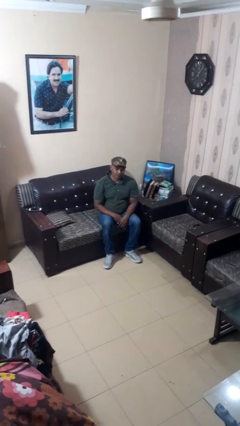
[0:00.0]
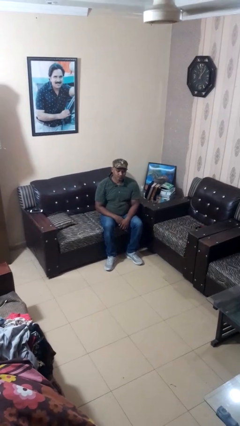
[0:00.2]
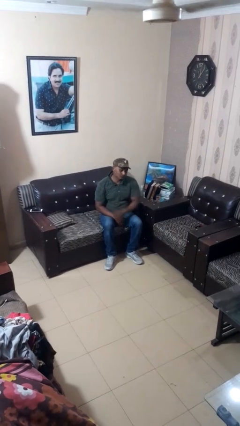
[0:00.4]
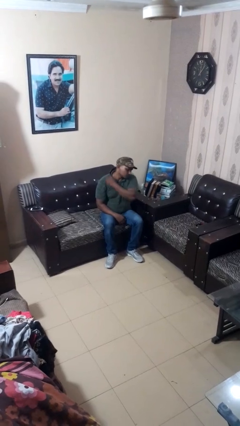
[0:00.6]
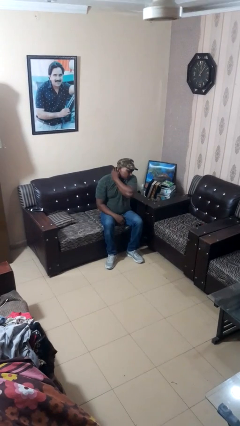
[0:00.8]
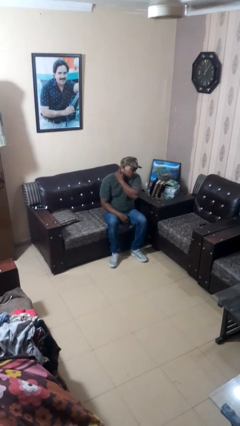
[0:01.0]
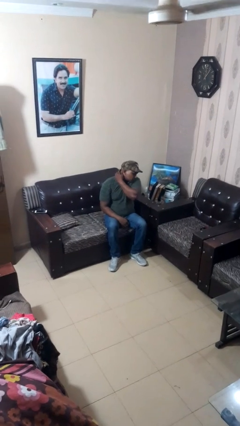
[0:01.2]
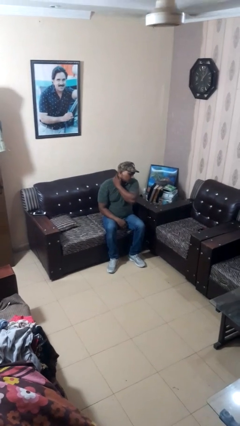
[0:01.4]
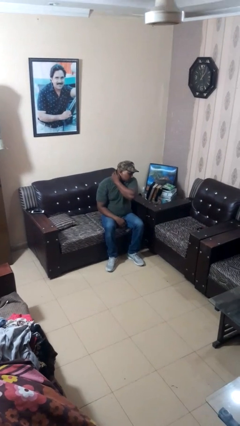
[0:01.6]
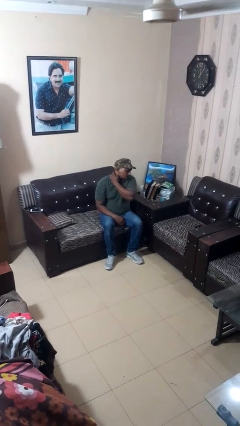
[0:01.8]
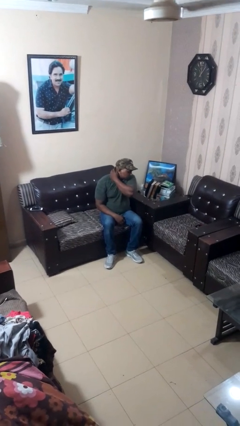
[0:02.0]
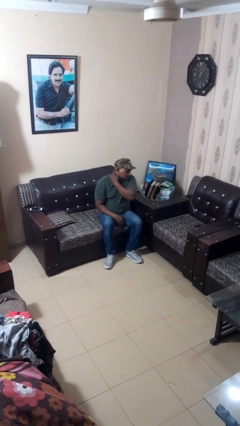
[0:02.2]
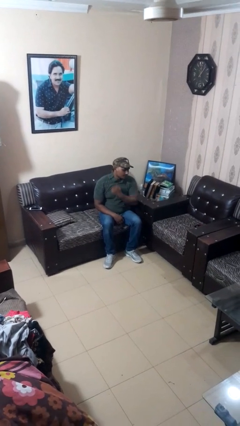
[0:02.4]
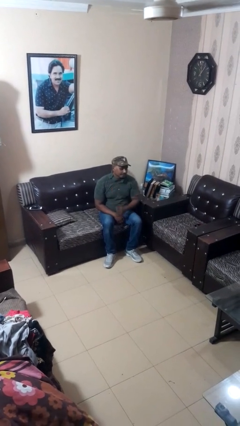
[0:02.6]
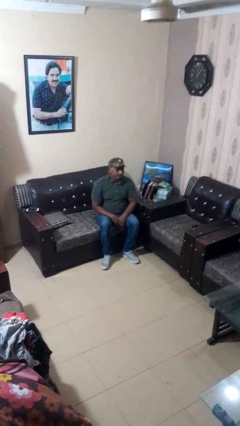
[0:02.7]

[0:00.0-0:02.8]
person rubs neck

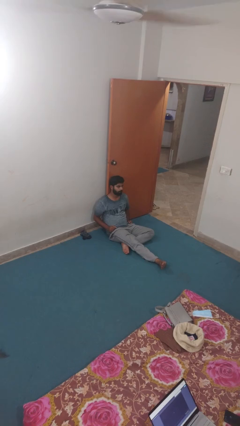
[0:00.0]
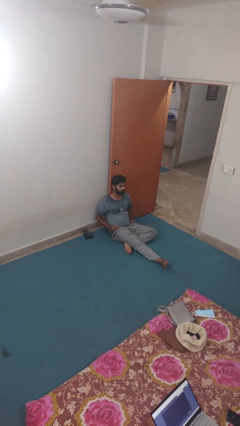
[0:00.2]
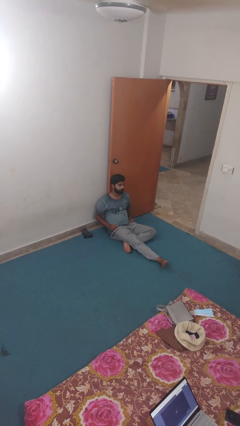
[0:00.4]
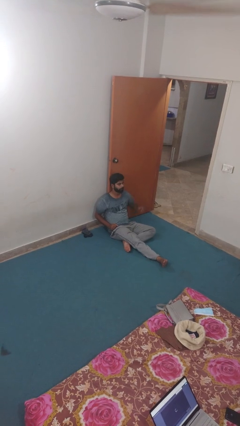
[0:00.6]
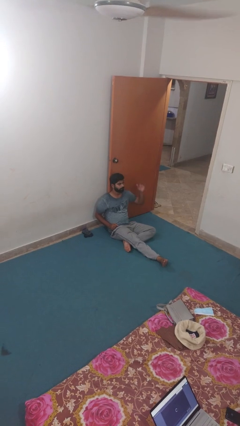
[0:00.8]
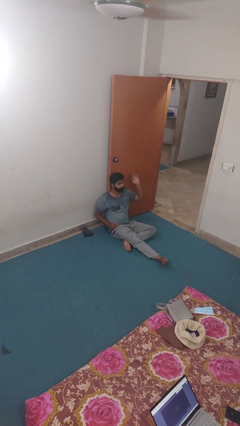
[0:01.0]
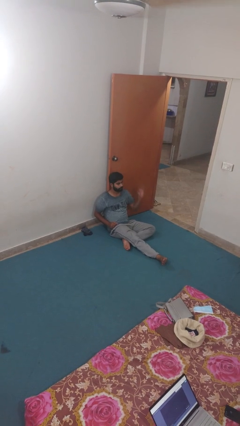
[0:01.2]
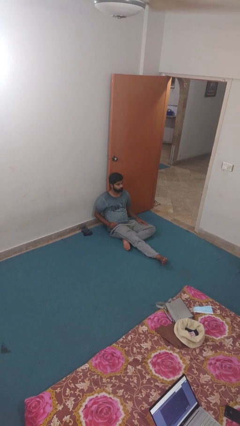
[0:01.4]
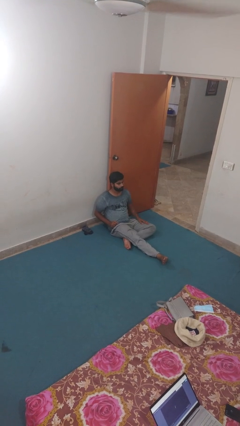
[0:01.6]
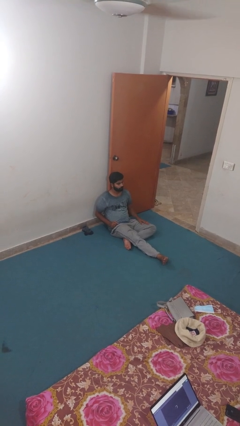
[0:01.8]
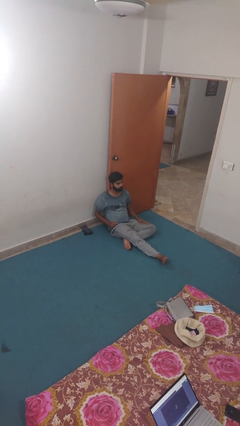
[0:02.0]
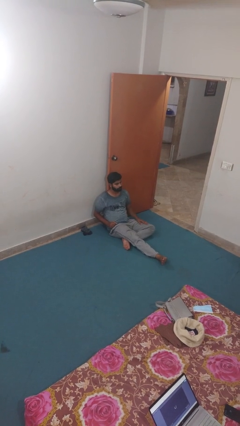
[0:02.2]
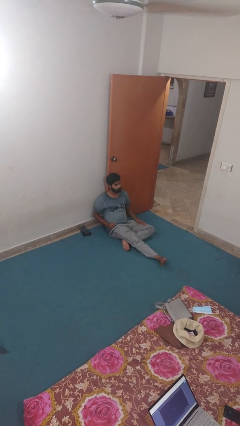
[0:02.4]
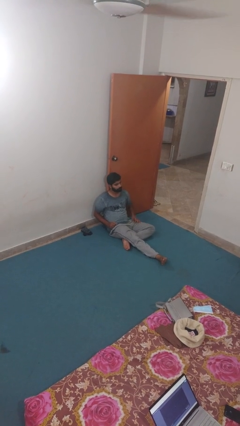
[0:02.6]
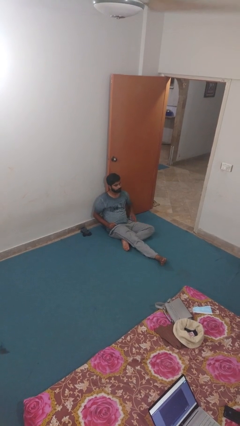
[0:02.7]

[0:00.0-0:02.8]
person slaps hands on thighs

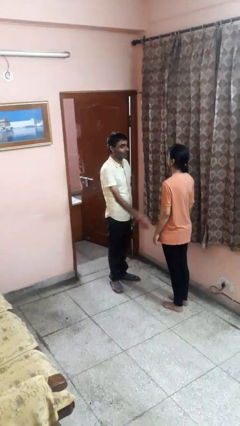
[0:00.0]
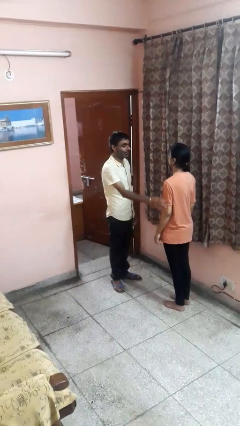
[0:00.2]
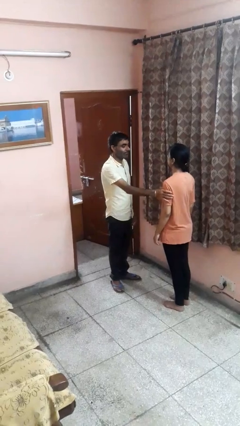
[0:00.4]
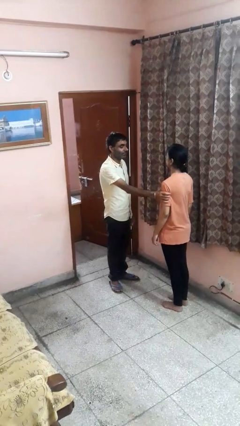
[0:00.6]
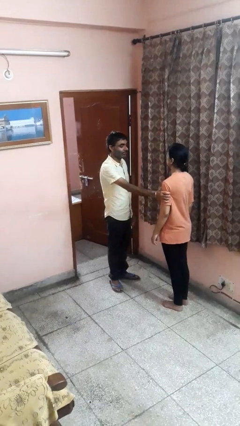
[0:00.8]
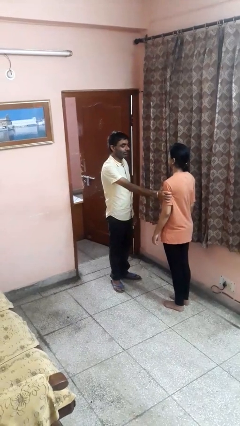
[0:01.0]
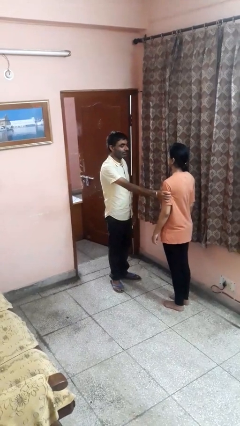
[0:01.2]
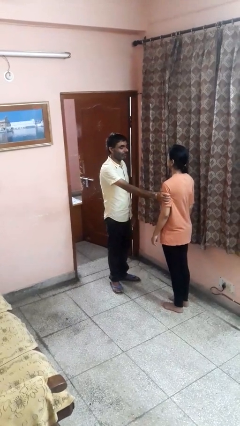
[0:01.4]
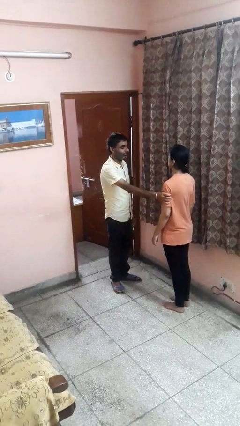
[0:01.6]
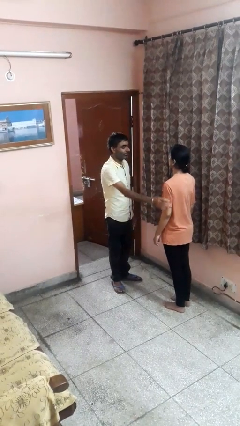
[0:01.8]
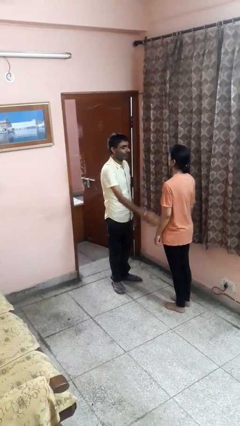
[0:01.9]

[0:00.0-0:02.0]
person grabs person by bicep

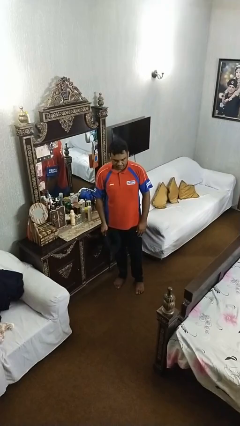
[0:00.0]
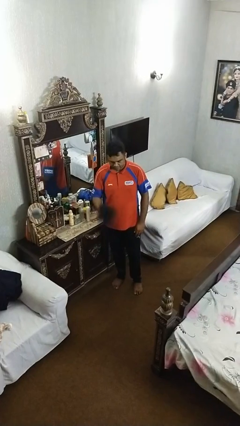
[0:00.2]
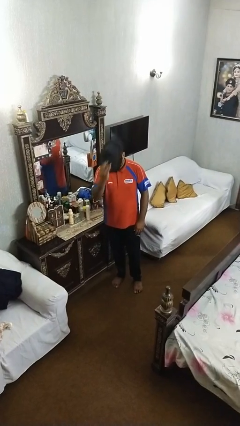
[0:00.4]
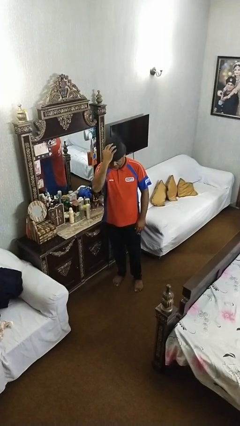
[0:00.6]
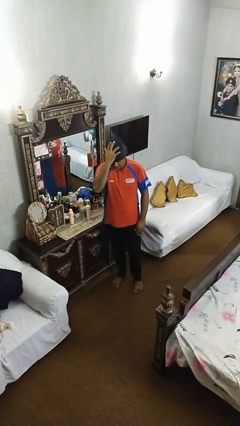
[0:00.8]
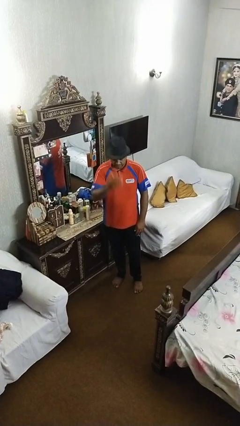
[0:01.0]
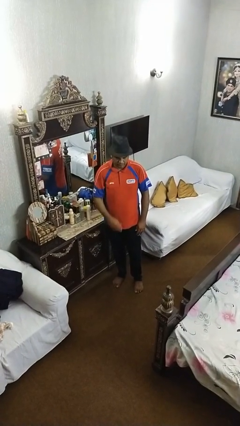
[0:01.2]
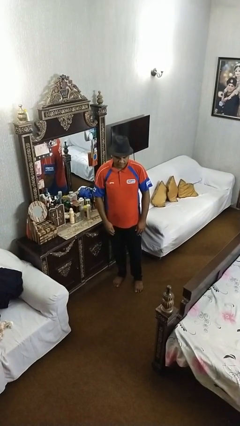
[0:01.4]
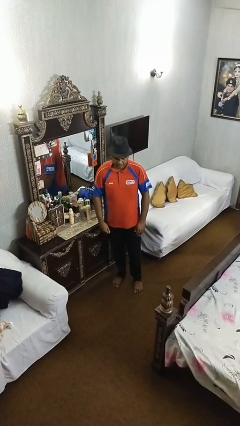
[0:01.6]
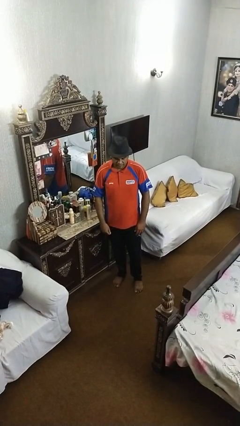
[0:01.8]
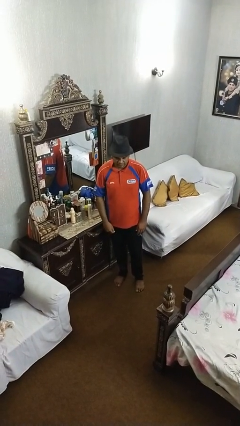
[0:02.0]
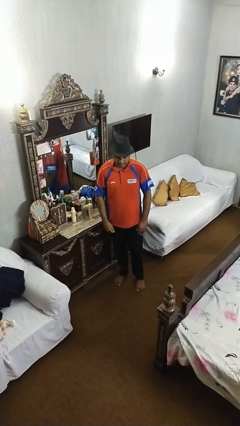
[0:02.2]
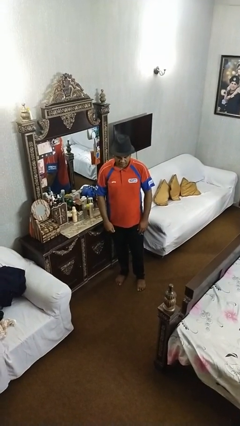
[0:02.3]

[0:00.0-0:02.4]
person puts on hat

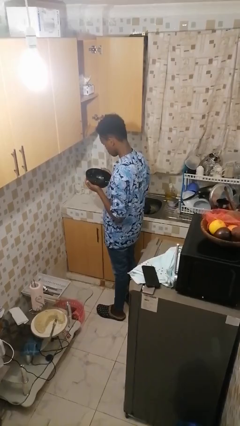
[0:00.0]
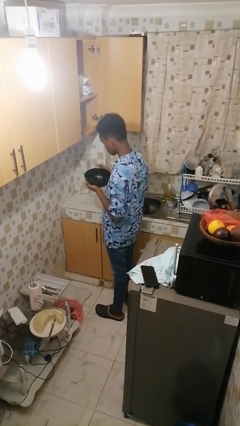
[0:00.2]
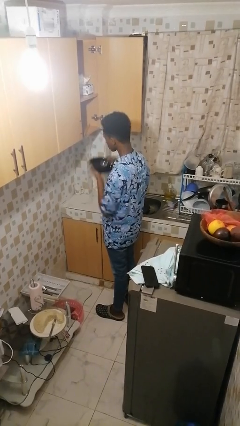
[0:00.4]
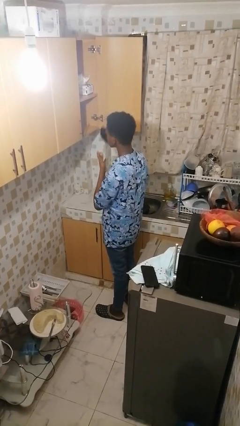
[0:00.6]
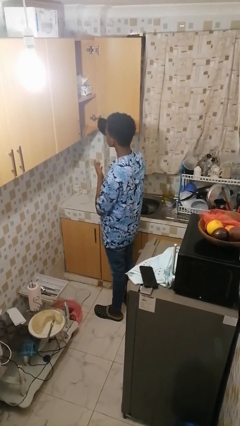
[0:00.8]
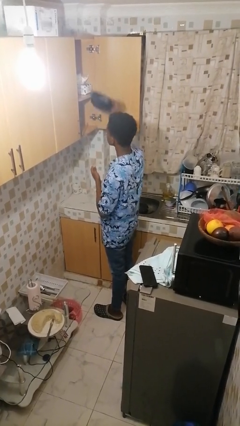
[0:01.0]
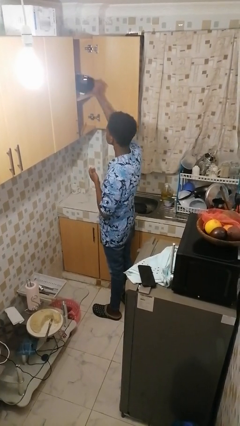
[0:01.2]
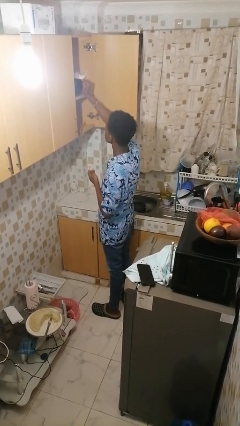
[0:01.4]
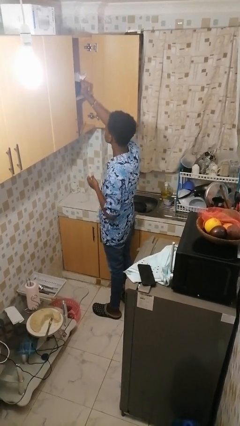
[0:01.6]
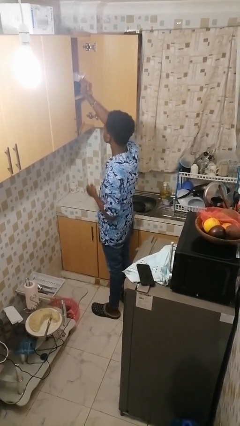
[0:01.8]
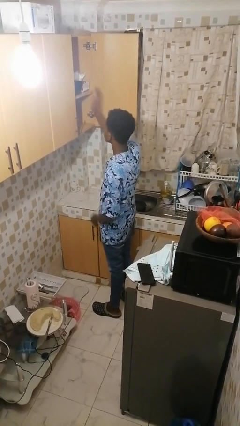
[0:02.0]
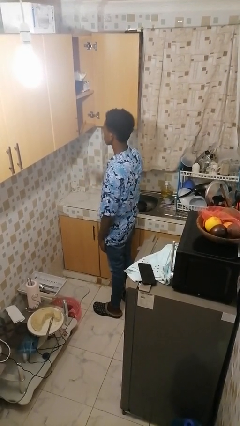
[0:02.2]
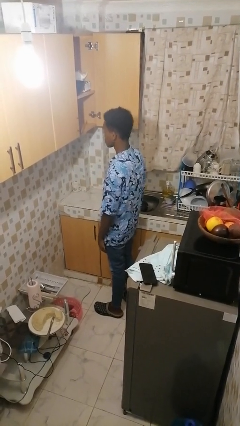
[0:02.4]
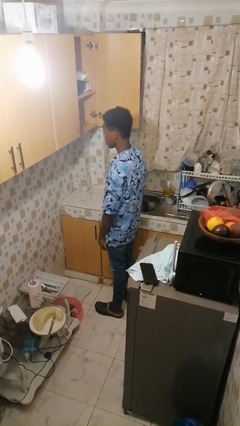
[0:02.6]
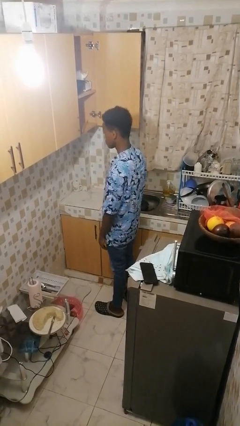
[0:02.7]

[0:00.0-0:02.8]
person puts down object into cabinet

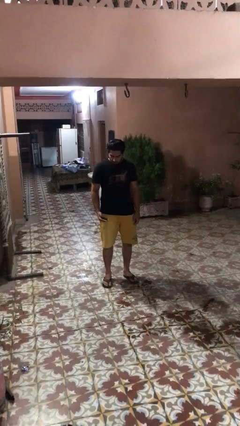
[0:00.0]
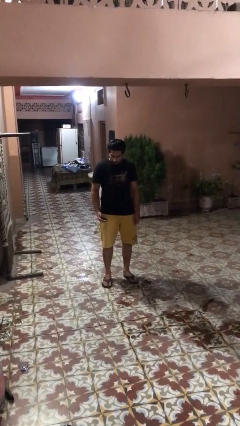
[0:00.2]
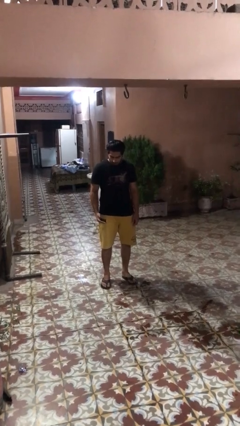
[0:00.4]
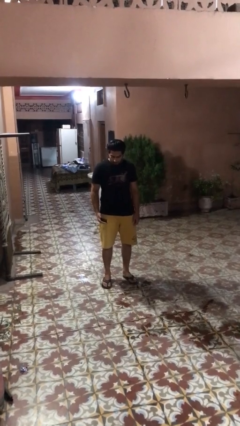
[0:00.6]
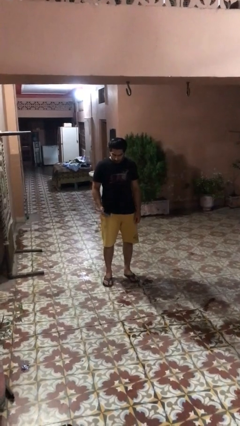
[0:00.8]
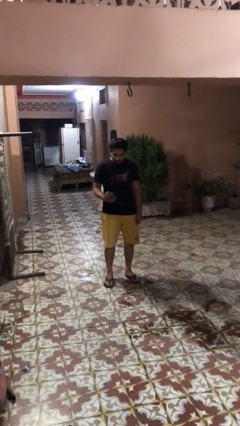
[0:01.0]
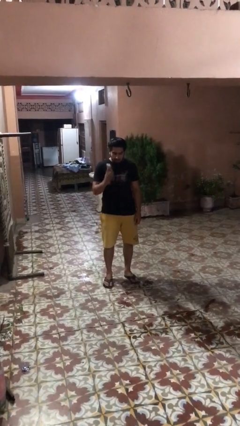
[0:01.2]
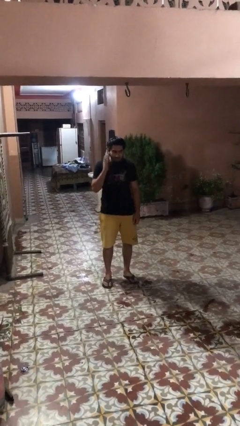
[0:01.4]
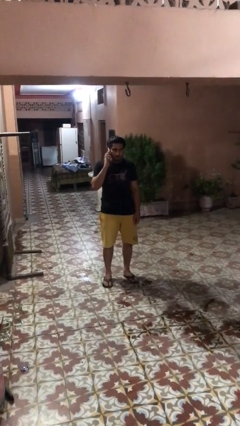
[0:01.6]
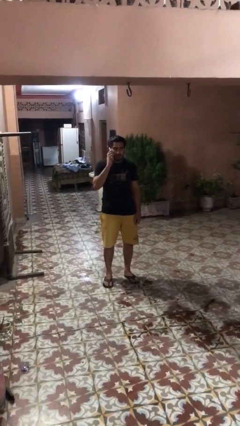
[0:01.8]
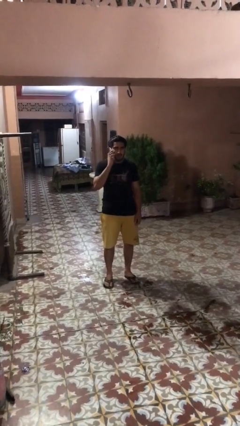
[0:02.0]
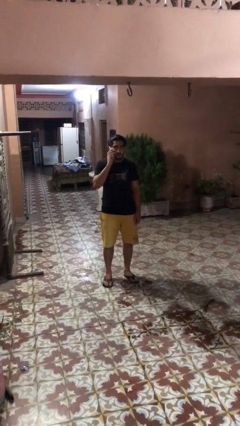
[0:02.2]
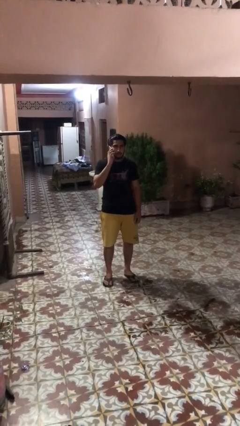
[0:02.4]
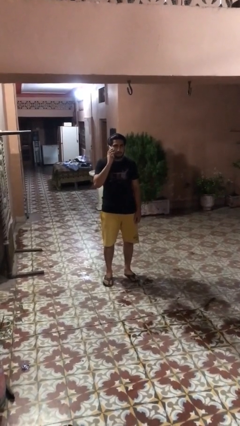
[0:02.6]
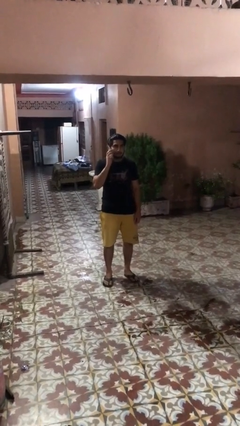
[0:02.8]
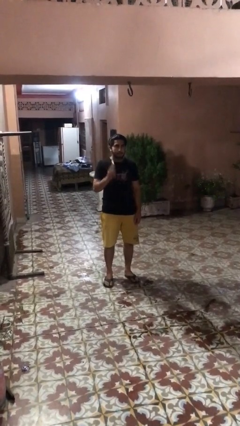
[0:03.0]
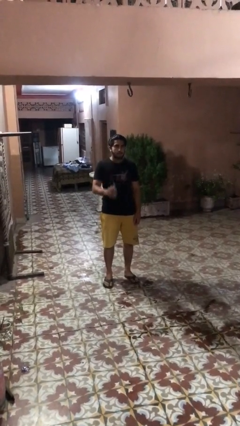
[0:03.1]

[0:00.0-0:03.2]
person gestures call me

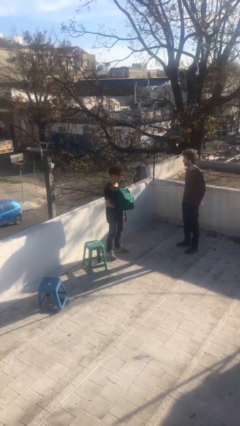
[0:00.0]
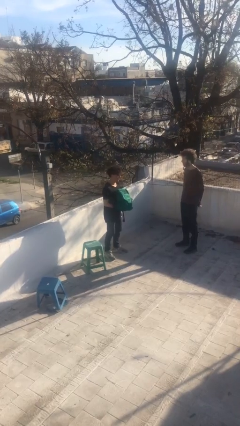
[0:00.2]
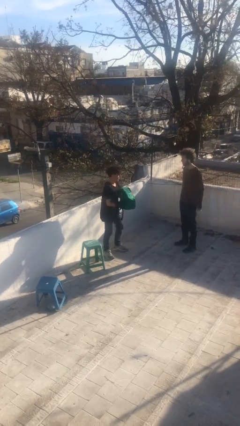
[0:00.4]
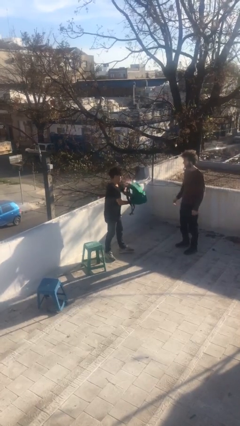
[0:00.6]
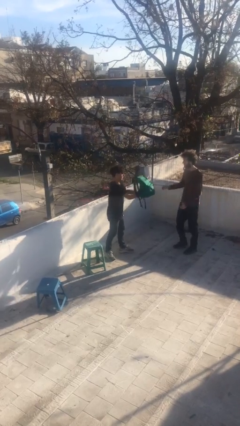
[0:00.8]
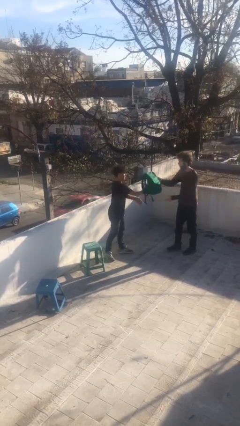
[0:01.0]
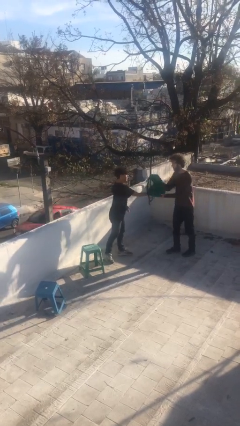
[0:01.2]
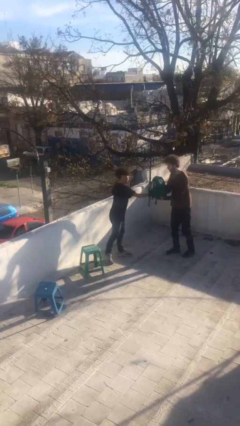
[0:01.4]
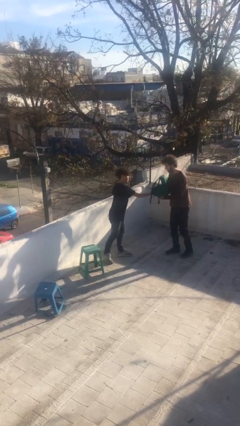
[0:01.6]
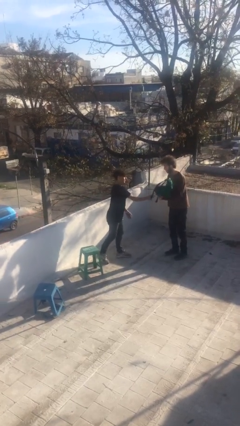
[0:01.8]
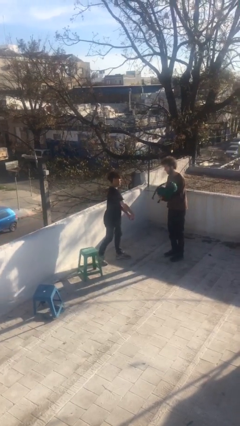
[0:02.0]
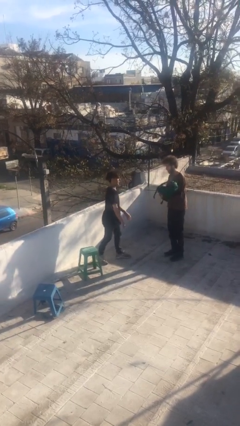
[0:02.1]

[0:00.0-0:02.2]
person transfers object to person
